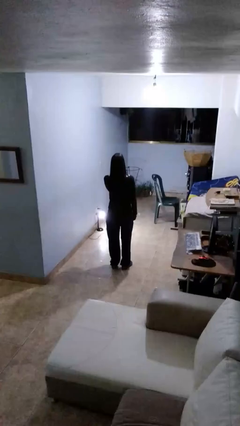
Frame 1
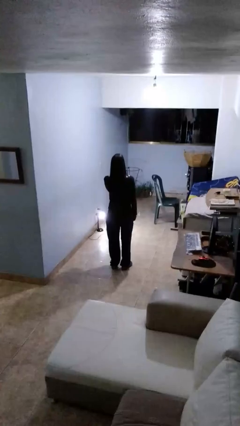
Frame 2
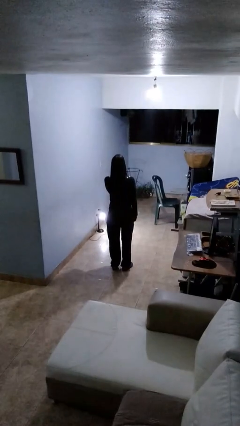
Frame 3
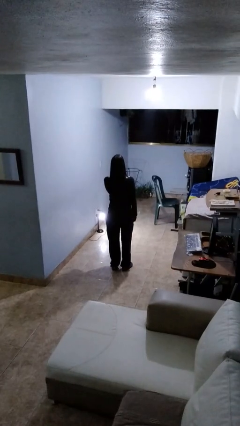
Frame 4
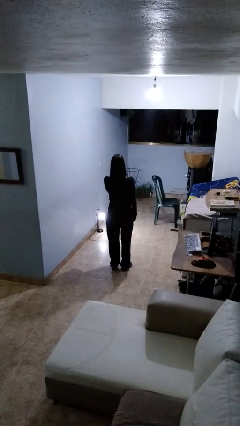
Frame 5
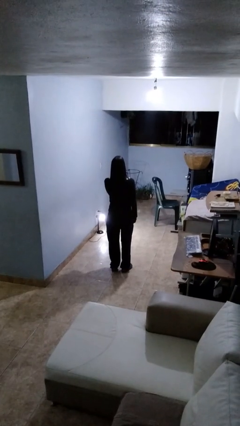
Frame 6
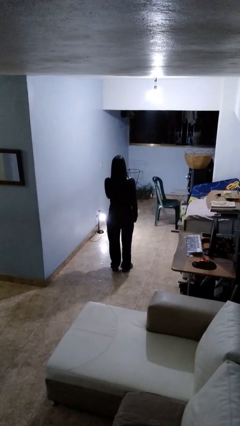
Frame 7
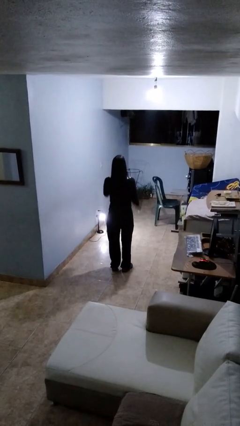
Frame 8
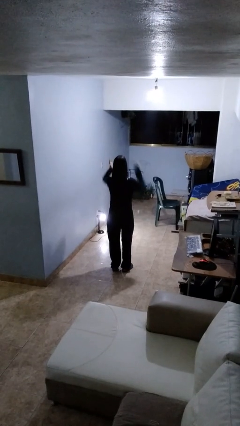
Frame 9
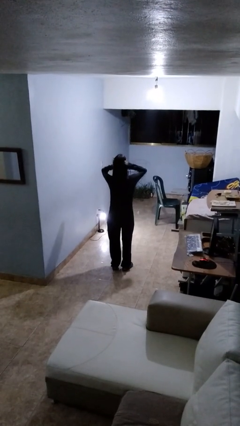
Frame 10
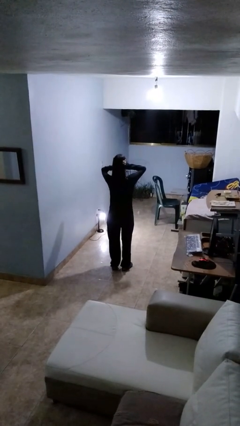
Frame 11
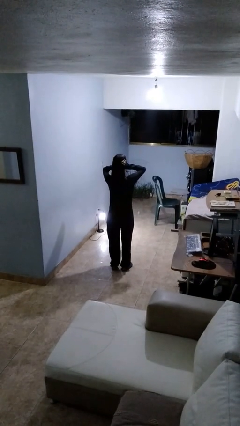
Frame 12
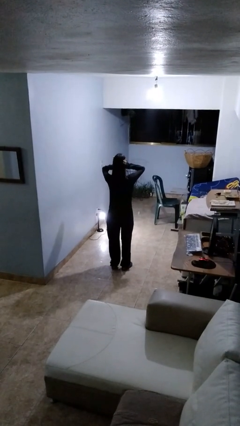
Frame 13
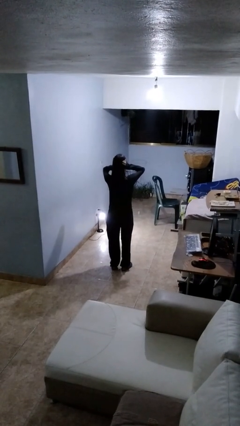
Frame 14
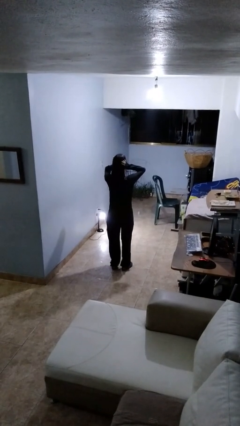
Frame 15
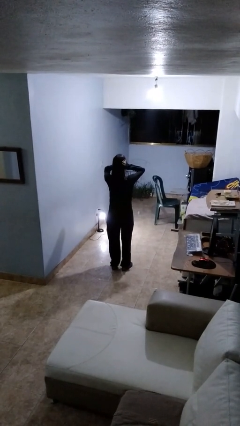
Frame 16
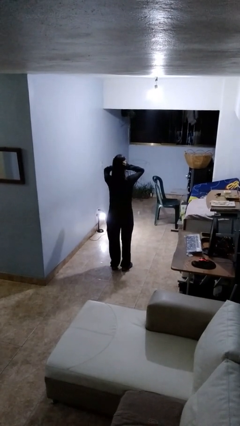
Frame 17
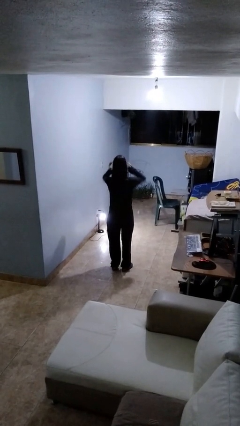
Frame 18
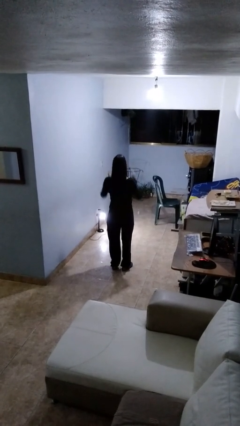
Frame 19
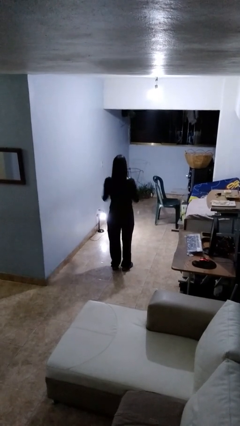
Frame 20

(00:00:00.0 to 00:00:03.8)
person puts fingers in ear

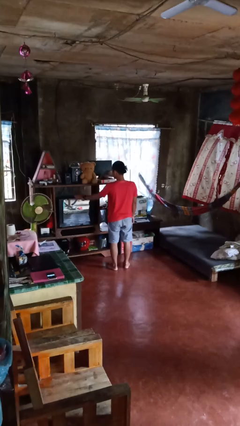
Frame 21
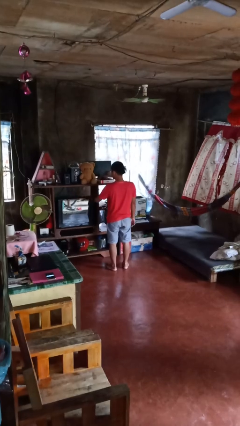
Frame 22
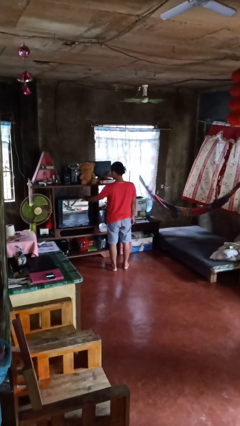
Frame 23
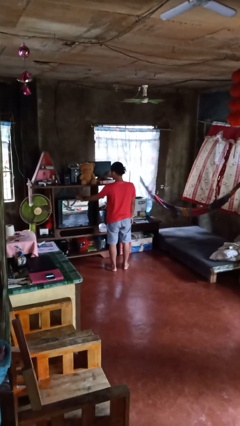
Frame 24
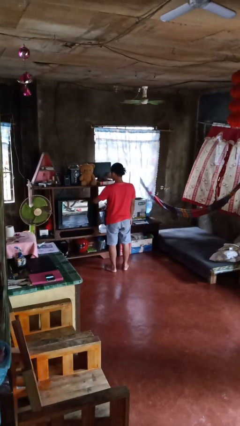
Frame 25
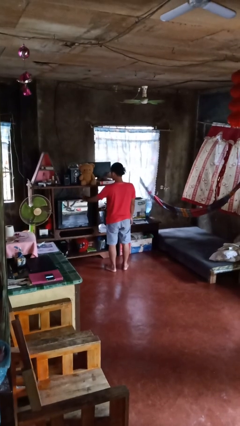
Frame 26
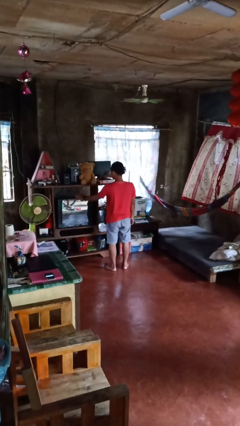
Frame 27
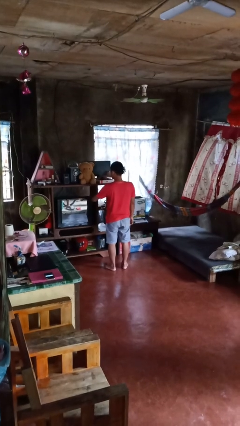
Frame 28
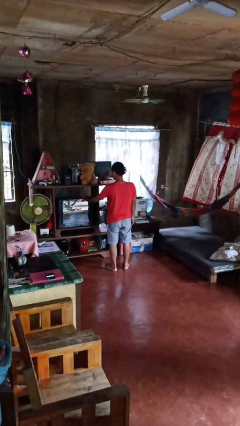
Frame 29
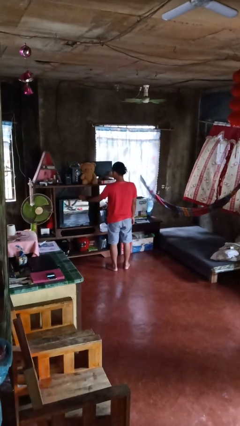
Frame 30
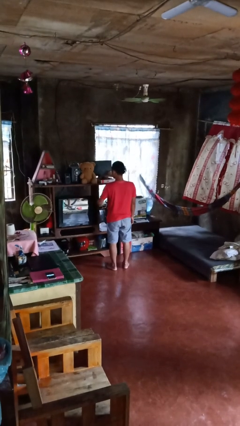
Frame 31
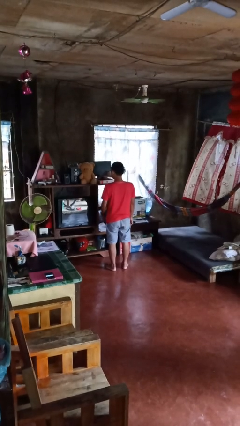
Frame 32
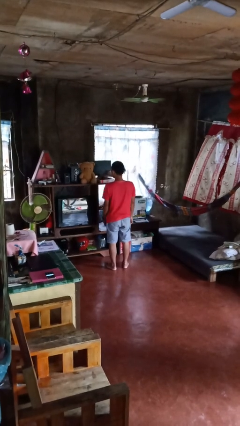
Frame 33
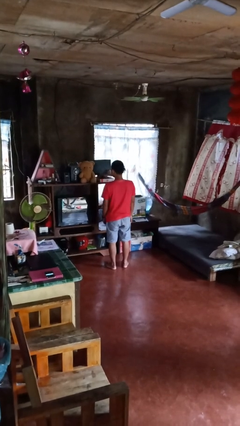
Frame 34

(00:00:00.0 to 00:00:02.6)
person waves hand over object

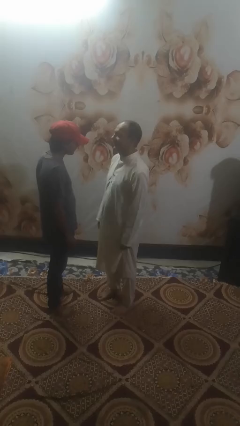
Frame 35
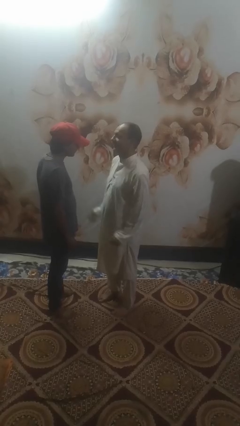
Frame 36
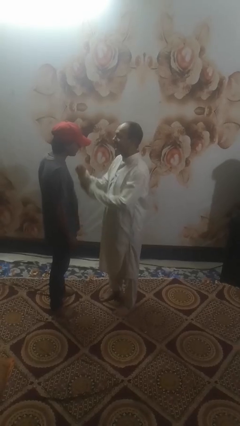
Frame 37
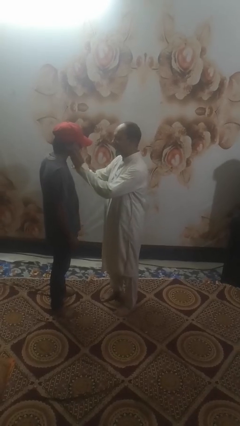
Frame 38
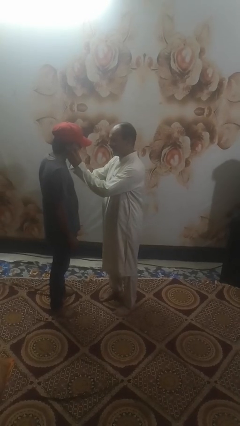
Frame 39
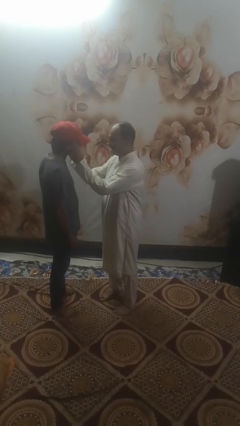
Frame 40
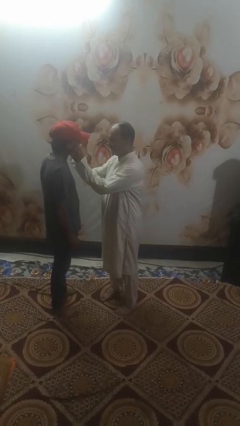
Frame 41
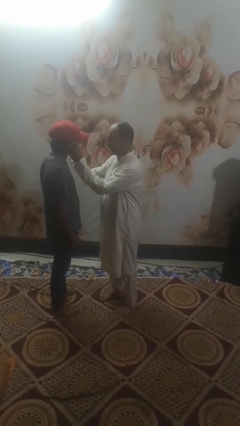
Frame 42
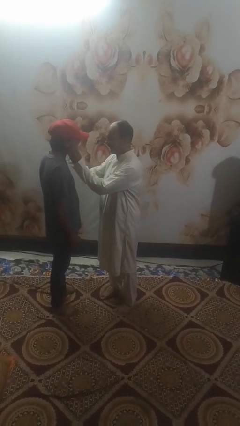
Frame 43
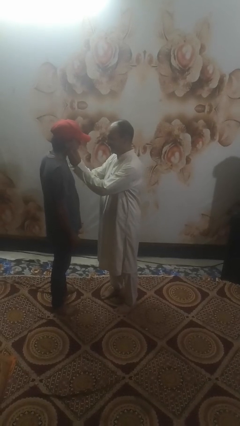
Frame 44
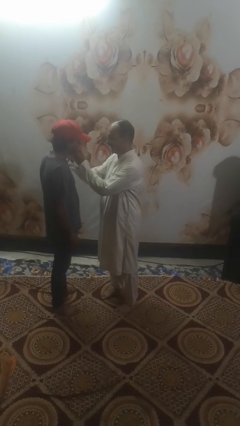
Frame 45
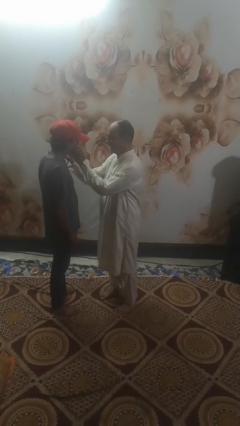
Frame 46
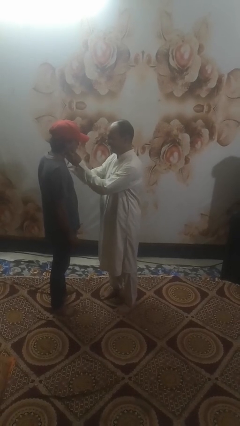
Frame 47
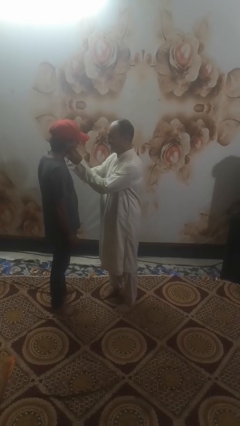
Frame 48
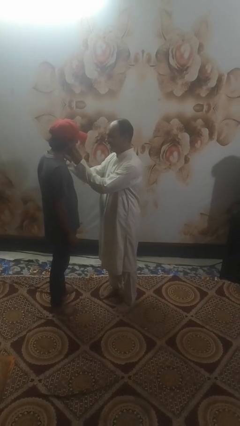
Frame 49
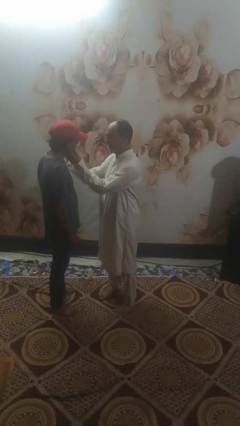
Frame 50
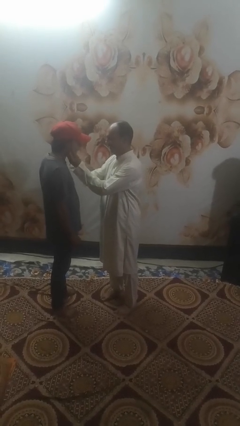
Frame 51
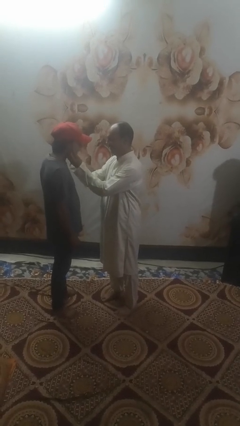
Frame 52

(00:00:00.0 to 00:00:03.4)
person touches face of person

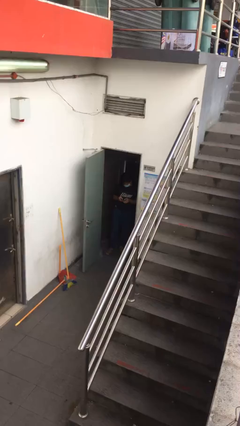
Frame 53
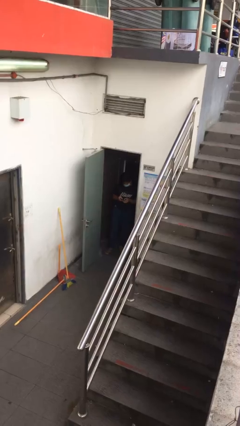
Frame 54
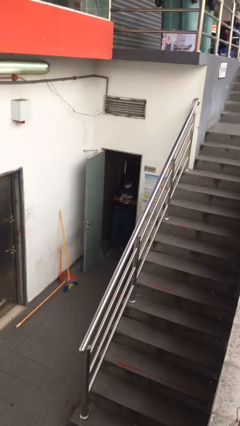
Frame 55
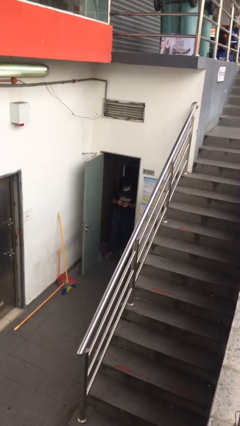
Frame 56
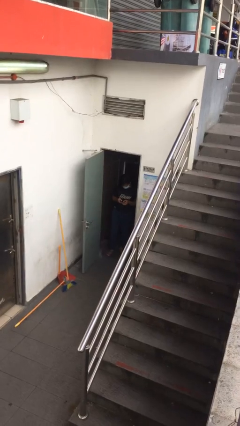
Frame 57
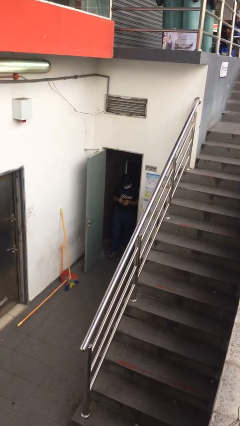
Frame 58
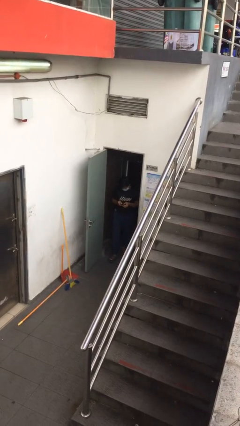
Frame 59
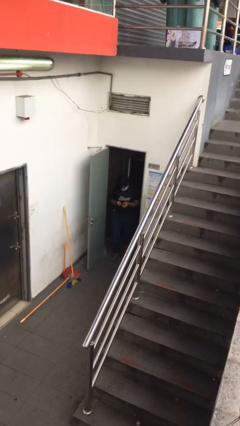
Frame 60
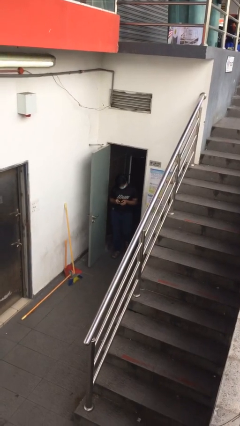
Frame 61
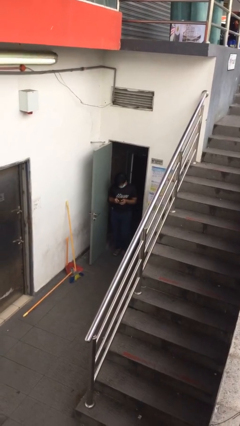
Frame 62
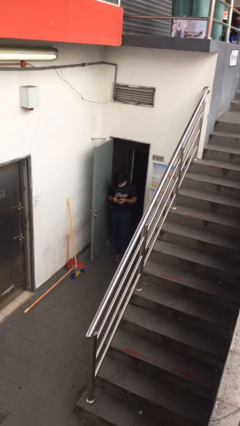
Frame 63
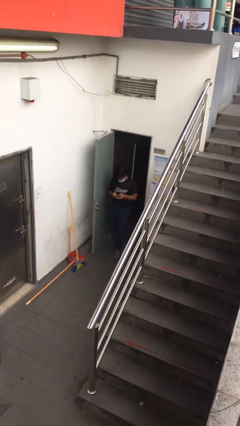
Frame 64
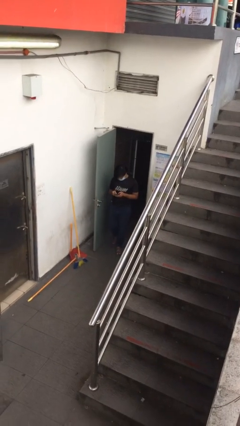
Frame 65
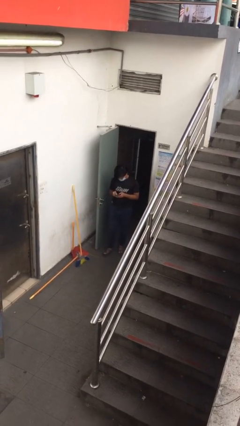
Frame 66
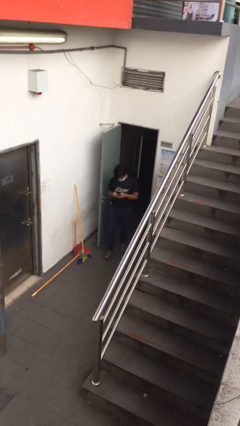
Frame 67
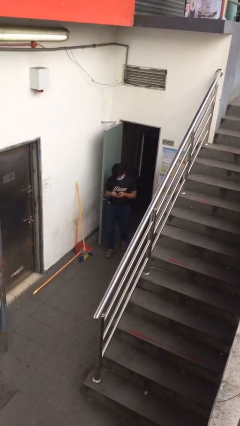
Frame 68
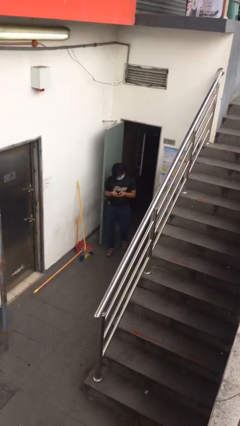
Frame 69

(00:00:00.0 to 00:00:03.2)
person enters scene through structure

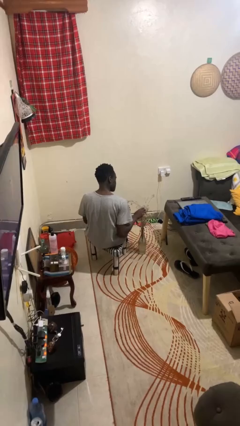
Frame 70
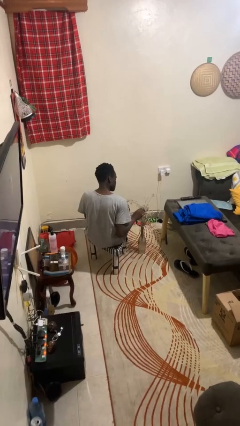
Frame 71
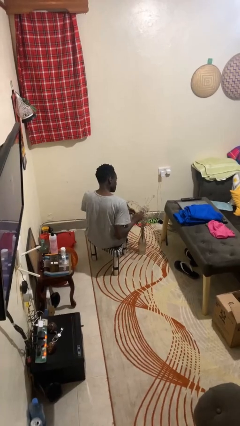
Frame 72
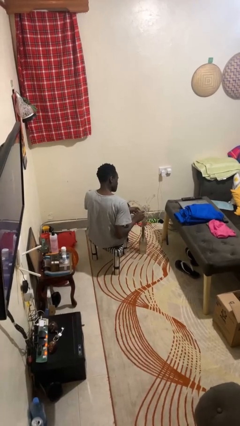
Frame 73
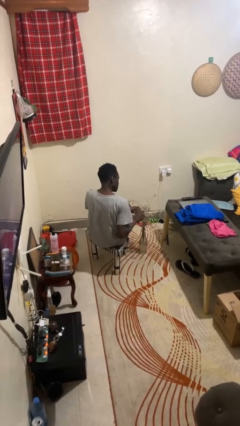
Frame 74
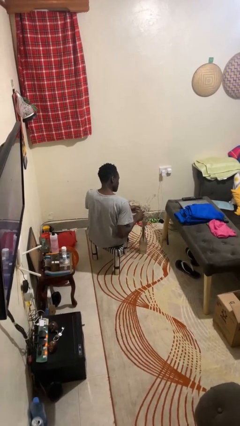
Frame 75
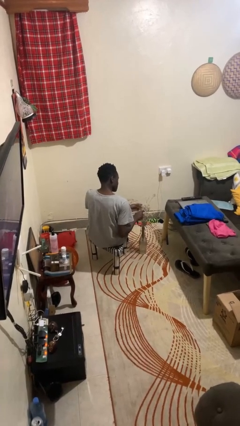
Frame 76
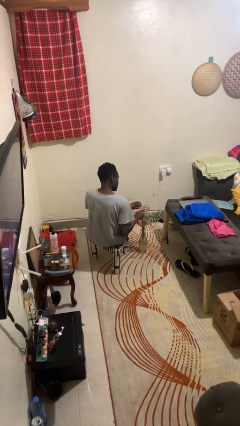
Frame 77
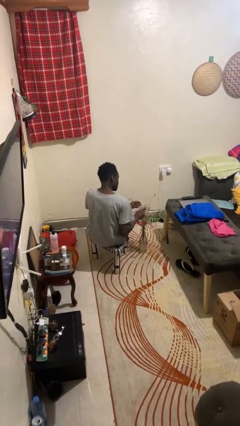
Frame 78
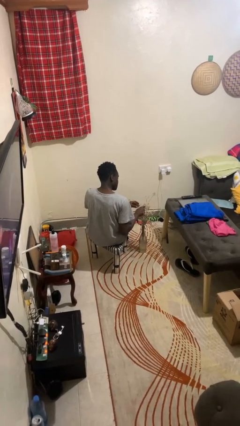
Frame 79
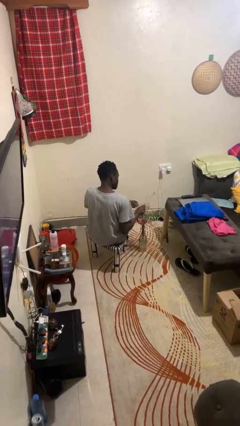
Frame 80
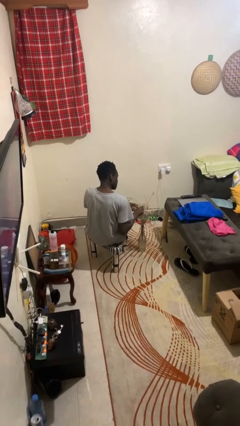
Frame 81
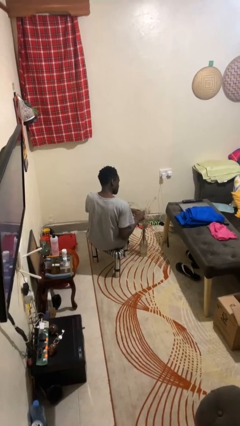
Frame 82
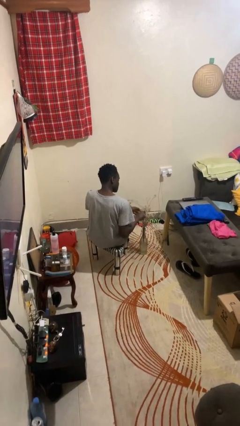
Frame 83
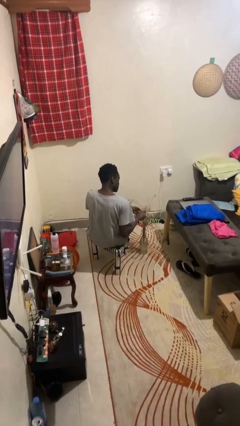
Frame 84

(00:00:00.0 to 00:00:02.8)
person arranges flowers in vase

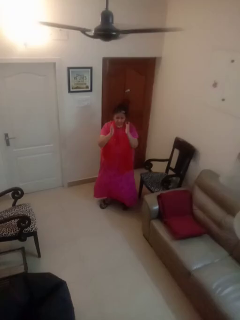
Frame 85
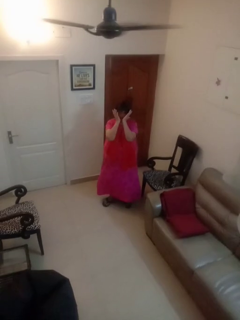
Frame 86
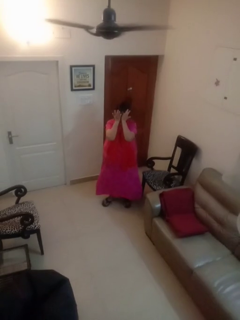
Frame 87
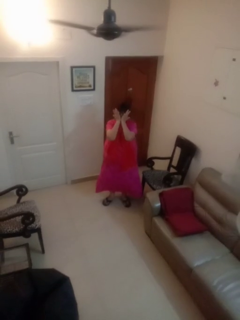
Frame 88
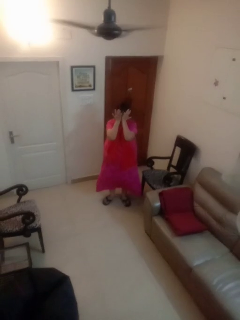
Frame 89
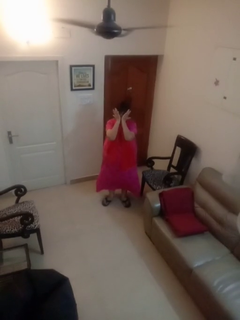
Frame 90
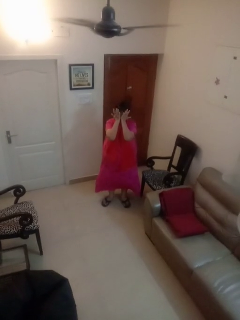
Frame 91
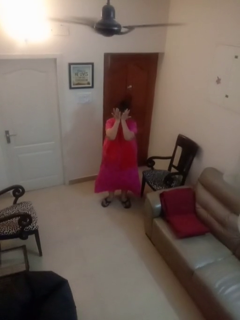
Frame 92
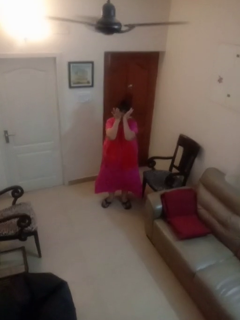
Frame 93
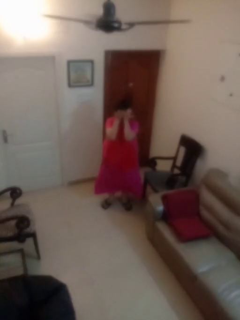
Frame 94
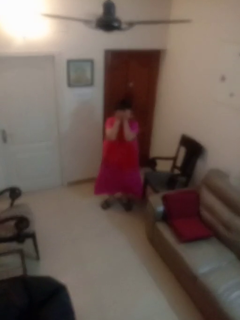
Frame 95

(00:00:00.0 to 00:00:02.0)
person rubs eyes
